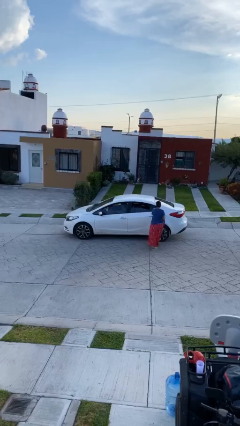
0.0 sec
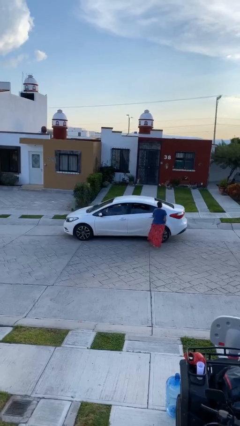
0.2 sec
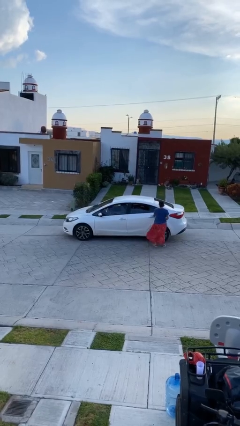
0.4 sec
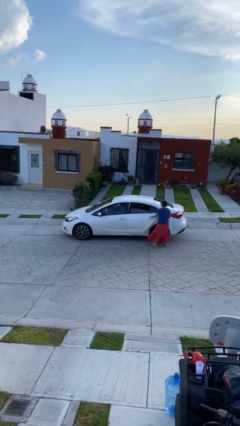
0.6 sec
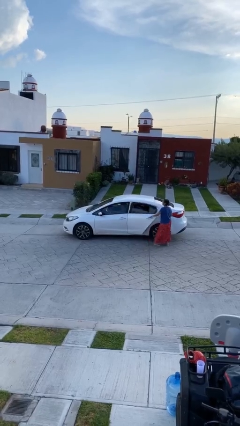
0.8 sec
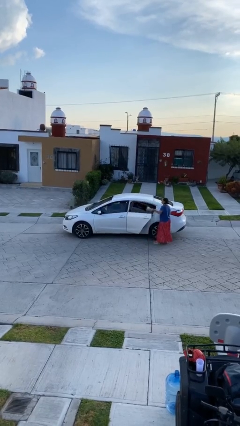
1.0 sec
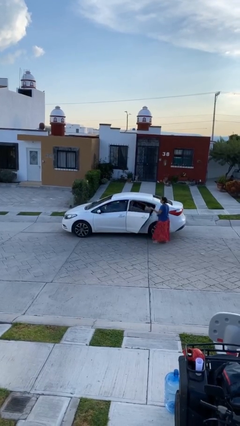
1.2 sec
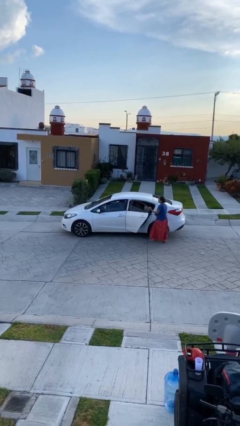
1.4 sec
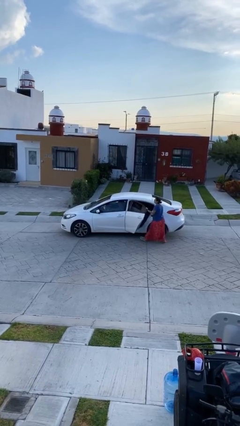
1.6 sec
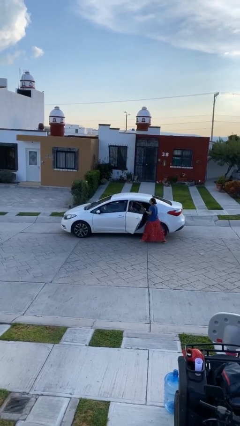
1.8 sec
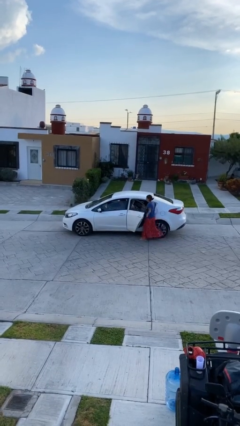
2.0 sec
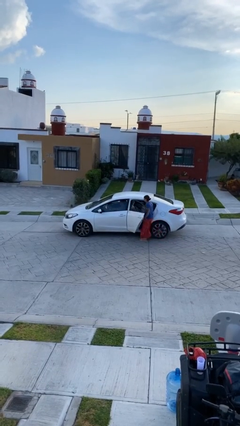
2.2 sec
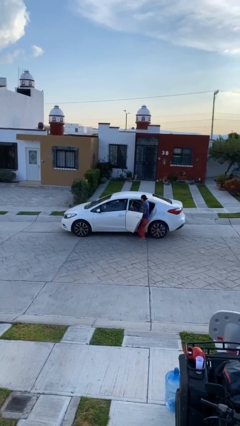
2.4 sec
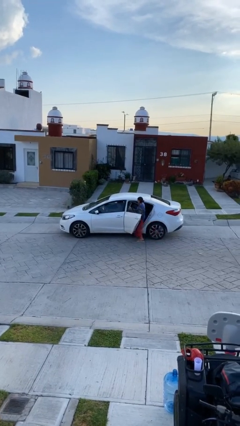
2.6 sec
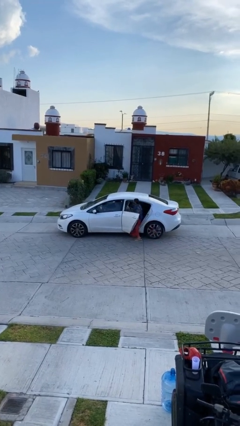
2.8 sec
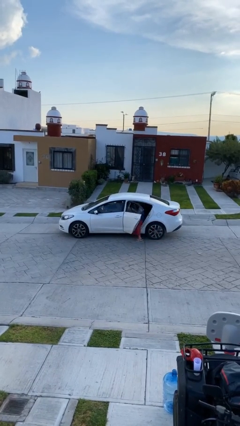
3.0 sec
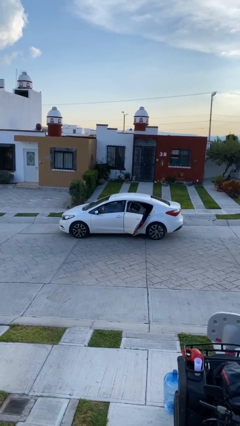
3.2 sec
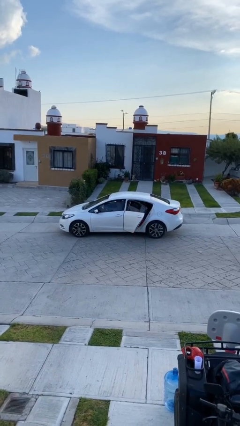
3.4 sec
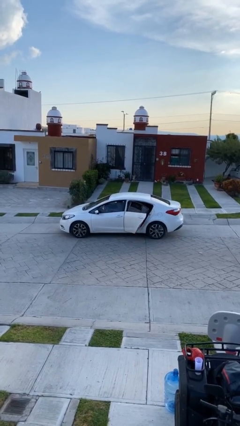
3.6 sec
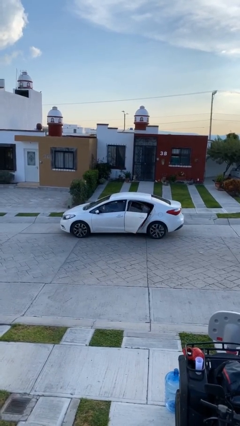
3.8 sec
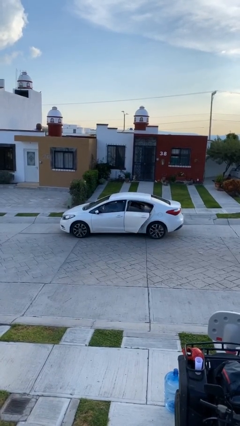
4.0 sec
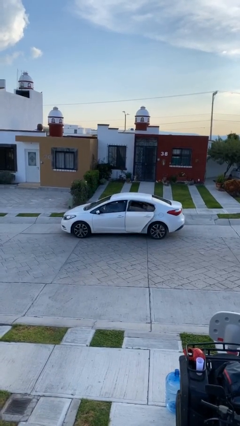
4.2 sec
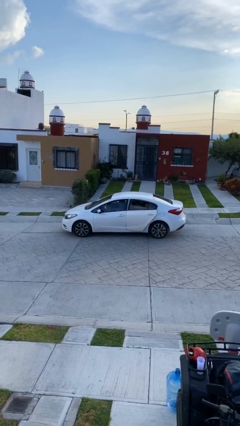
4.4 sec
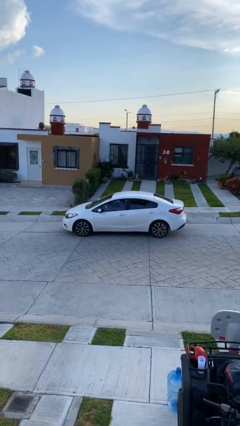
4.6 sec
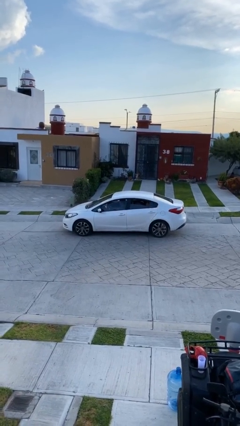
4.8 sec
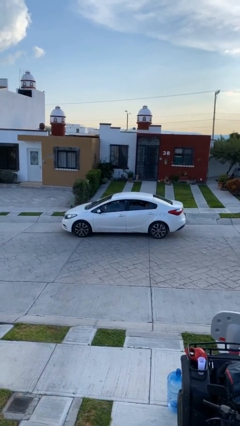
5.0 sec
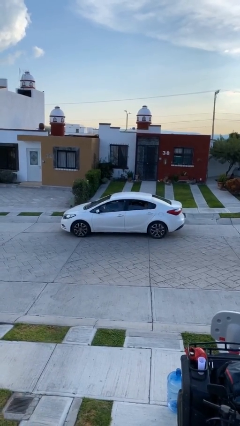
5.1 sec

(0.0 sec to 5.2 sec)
car picks up person

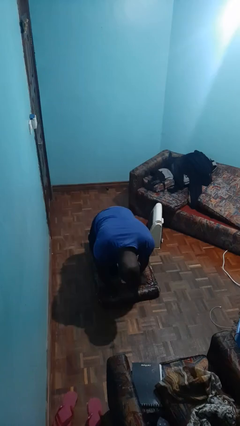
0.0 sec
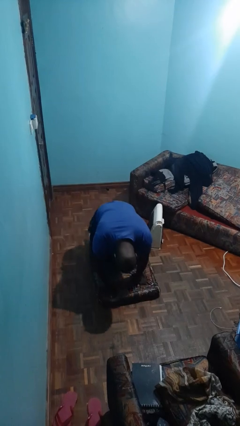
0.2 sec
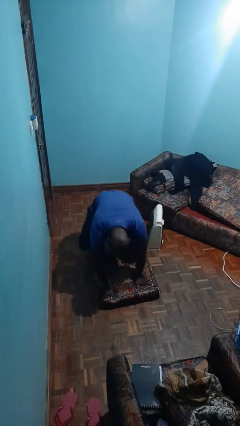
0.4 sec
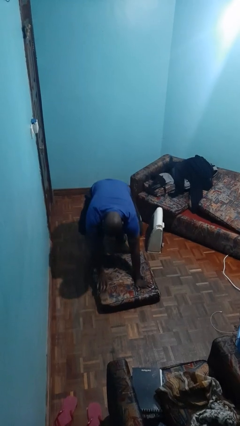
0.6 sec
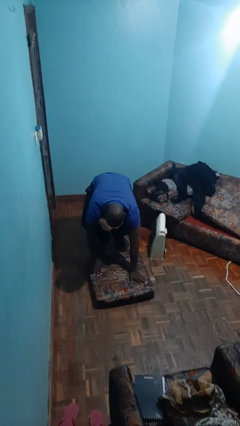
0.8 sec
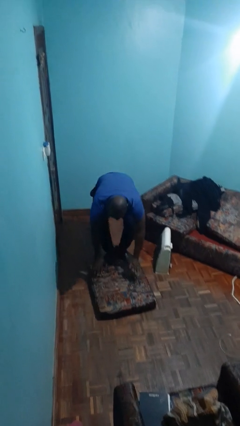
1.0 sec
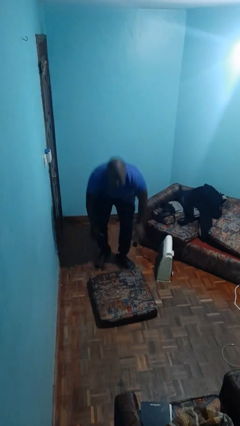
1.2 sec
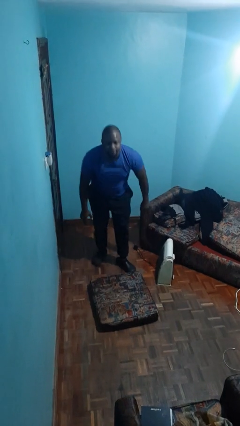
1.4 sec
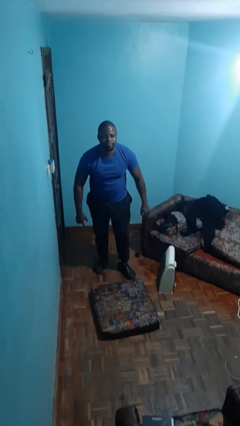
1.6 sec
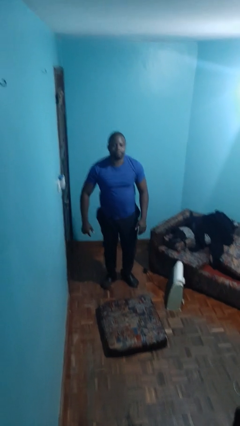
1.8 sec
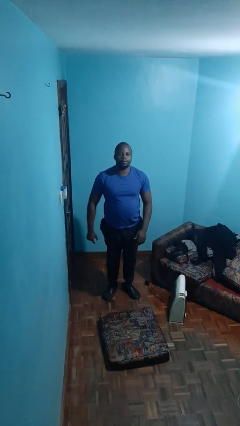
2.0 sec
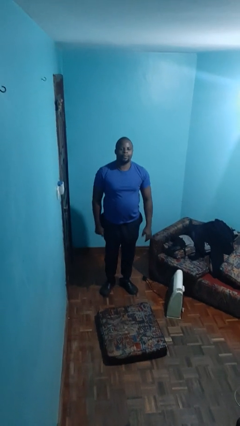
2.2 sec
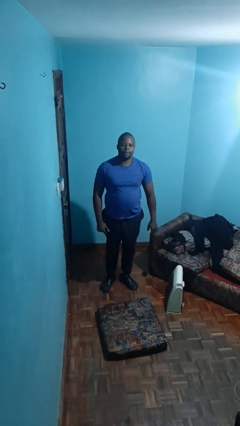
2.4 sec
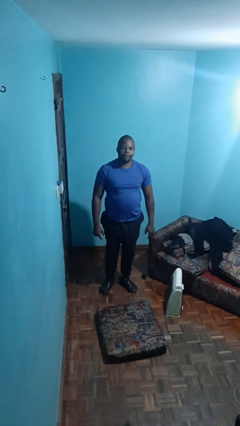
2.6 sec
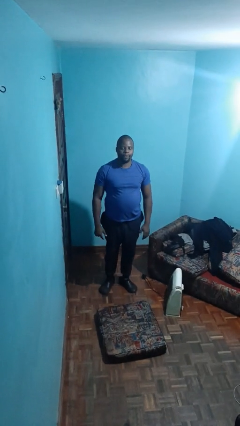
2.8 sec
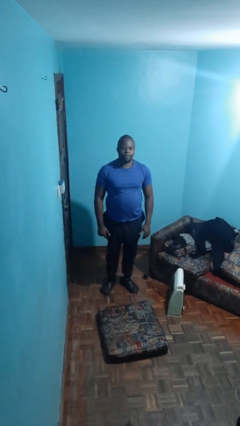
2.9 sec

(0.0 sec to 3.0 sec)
person stands up from floor

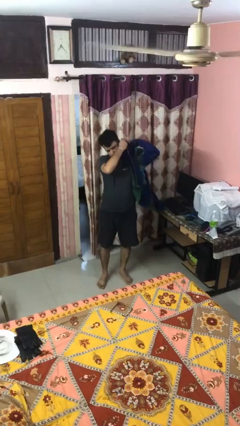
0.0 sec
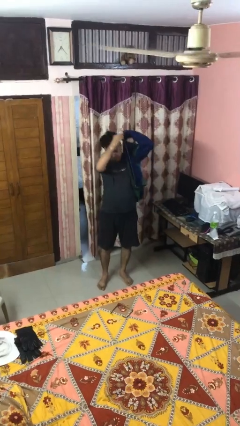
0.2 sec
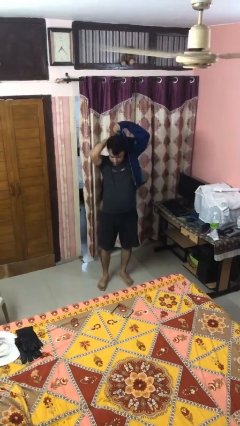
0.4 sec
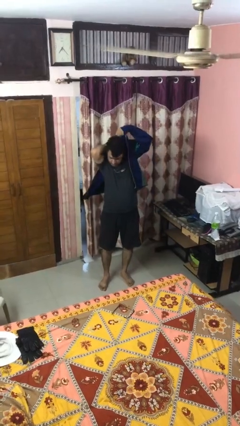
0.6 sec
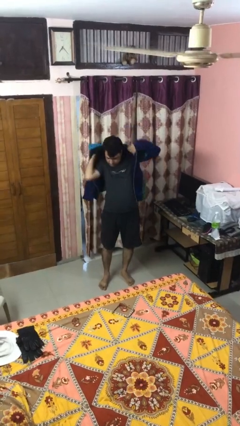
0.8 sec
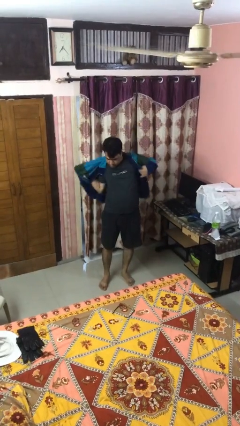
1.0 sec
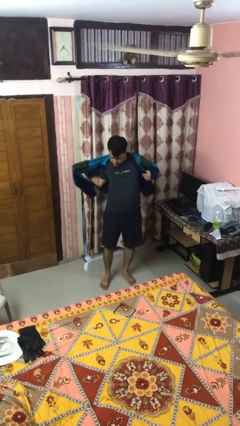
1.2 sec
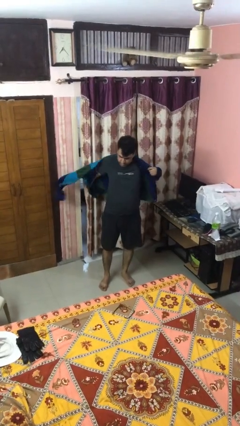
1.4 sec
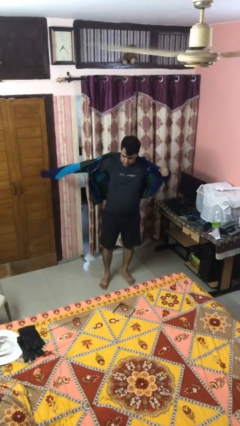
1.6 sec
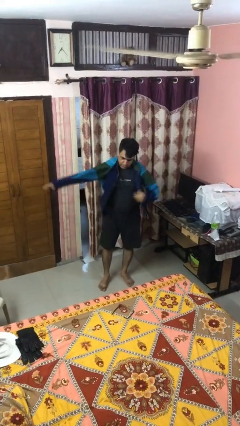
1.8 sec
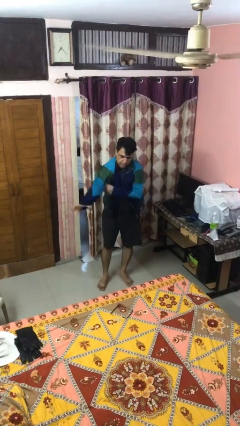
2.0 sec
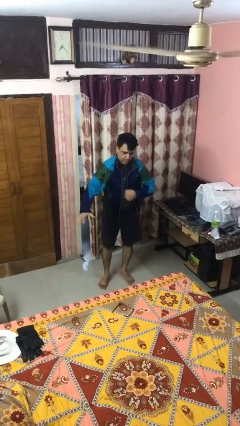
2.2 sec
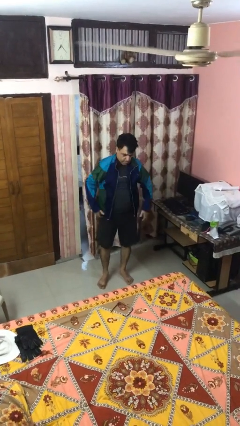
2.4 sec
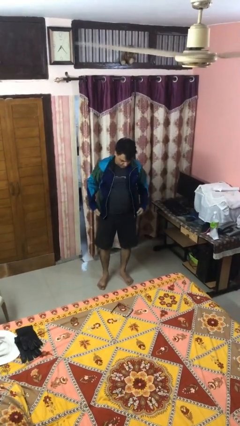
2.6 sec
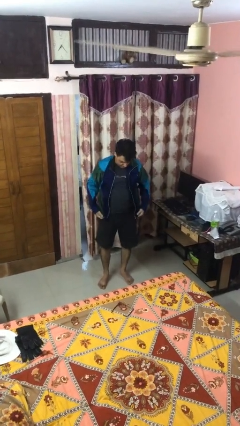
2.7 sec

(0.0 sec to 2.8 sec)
person puts on jacket

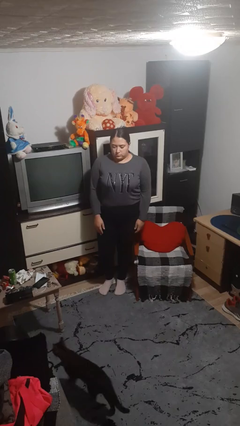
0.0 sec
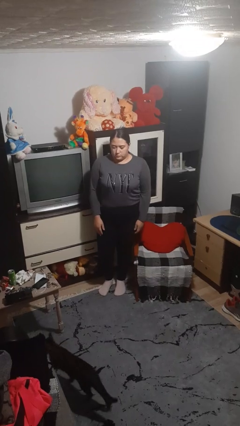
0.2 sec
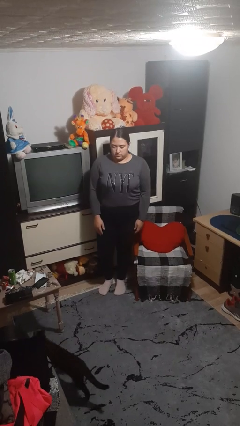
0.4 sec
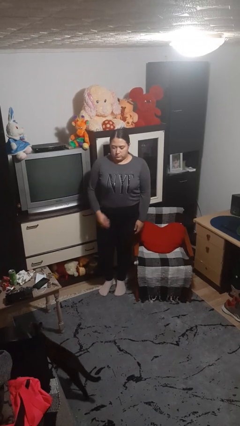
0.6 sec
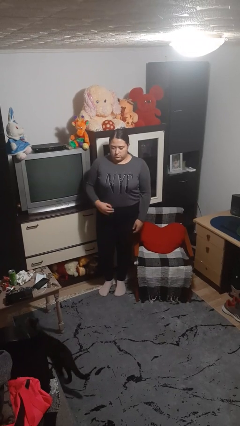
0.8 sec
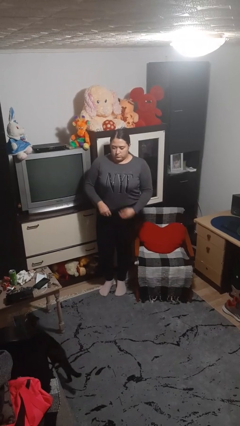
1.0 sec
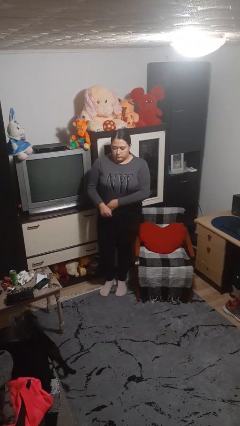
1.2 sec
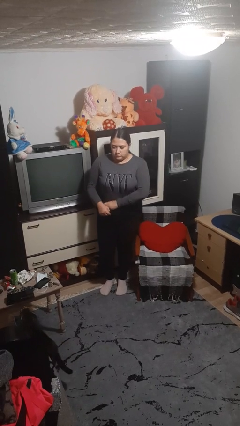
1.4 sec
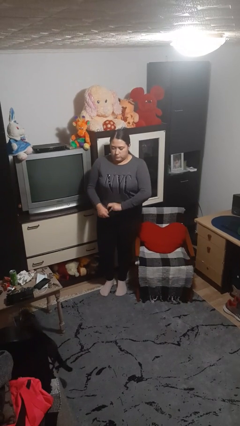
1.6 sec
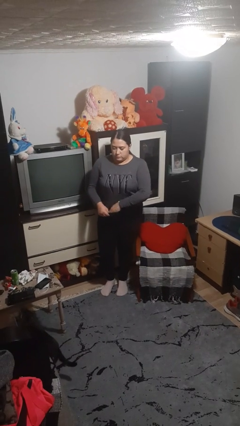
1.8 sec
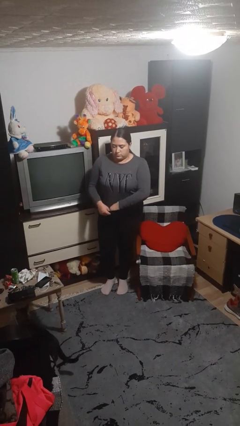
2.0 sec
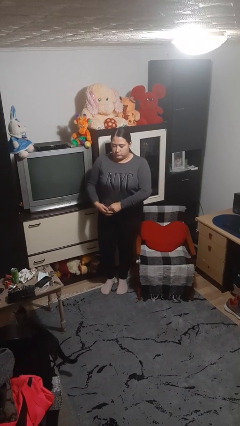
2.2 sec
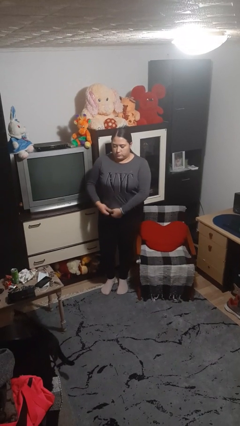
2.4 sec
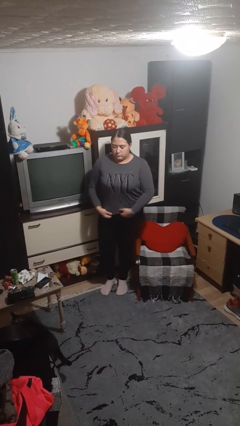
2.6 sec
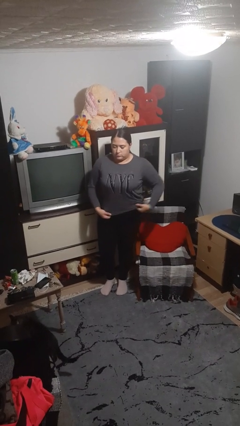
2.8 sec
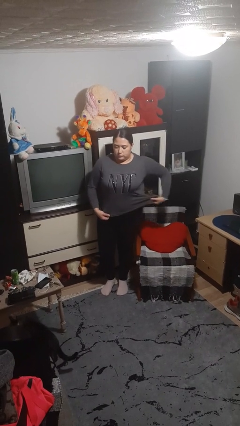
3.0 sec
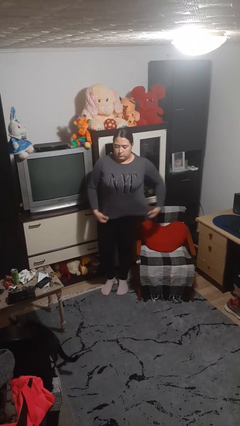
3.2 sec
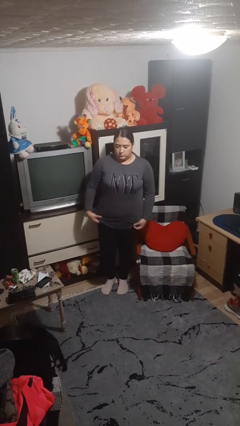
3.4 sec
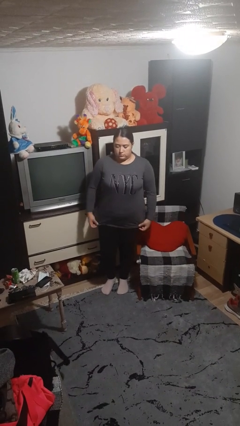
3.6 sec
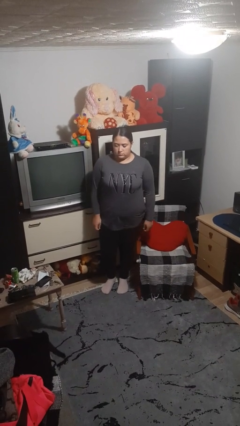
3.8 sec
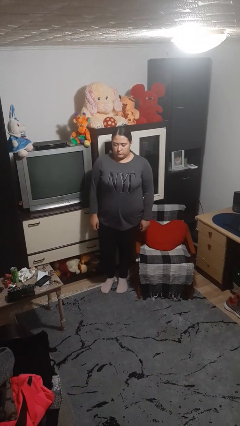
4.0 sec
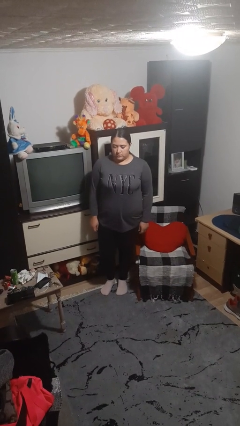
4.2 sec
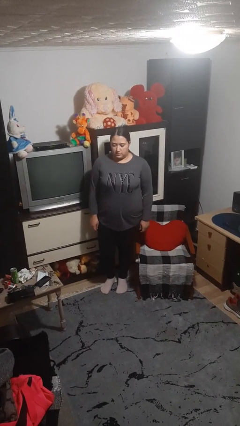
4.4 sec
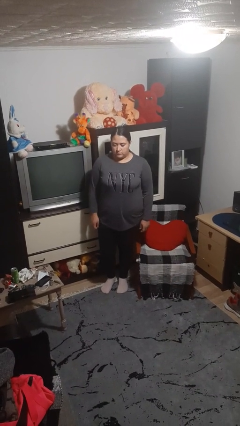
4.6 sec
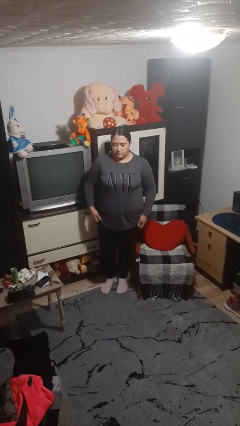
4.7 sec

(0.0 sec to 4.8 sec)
person untucks shirt

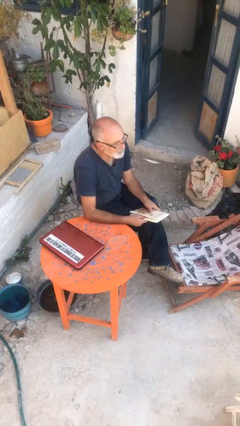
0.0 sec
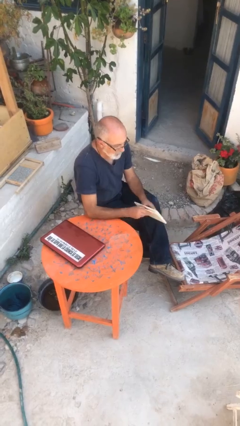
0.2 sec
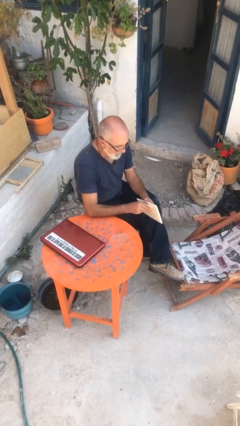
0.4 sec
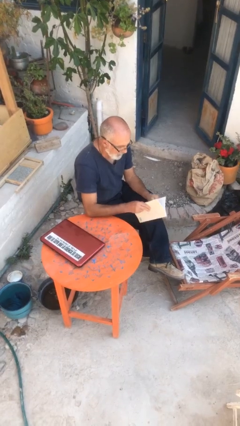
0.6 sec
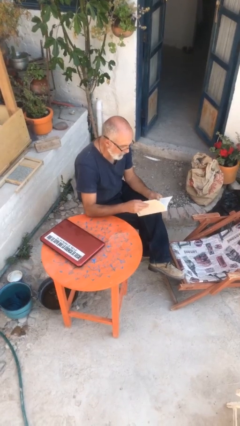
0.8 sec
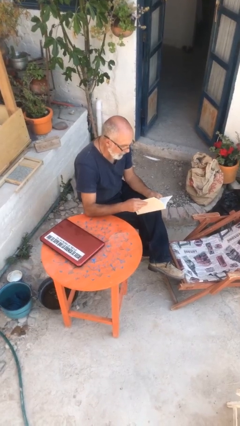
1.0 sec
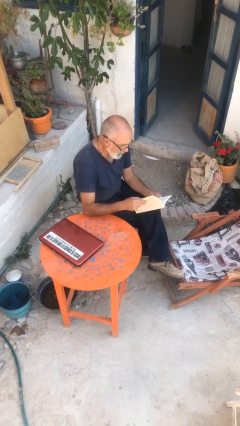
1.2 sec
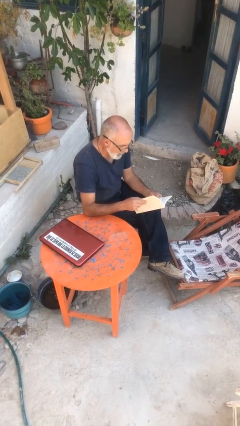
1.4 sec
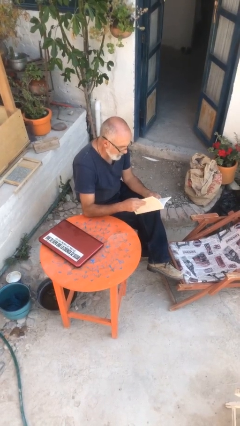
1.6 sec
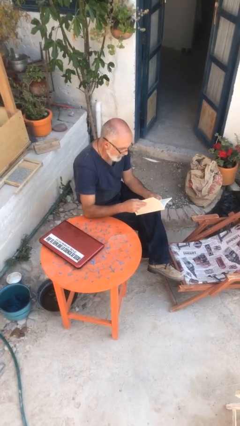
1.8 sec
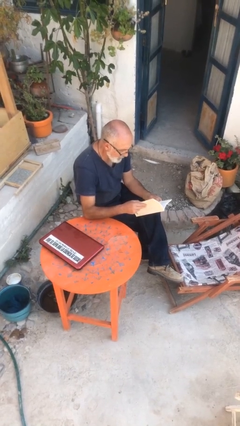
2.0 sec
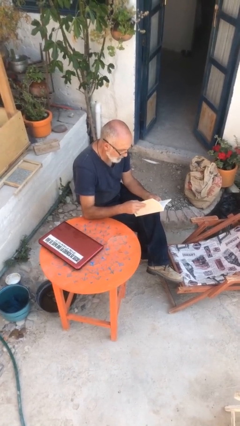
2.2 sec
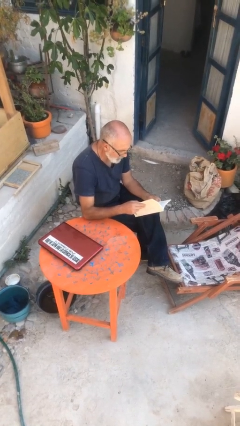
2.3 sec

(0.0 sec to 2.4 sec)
person reads document
